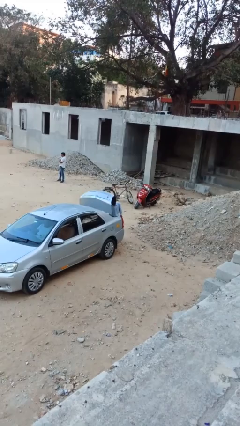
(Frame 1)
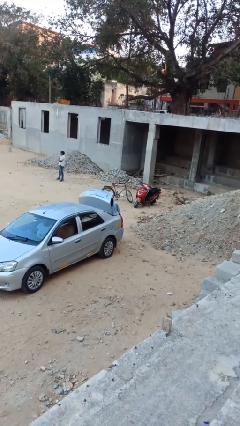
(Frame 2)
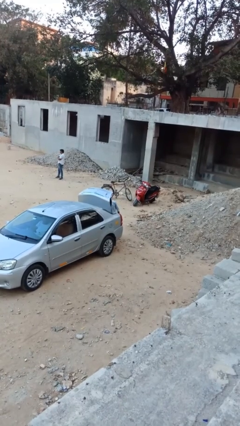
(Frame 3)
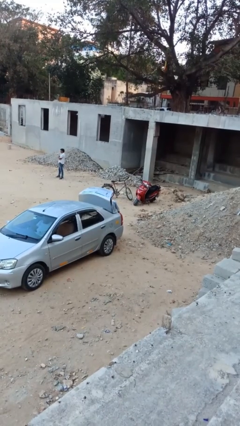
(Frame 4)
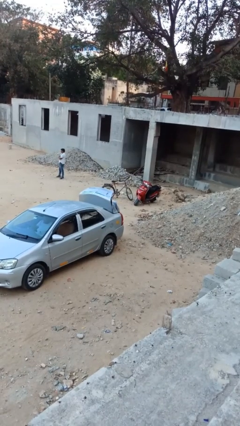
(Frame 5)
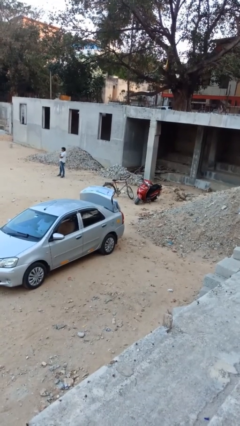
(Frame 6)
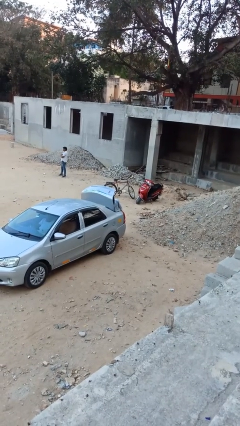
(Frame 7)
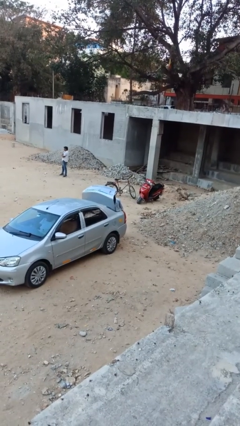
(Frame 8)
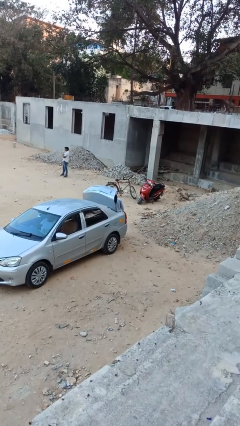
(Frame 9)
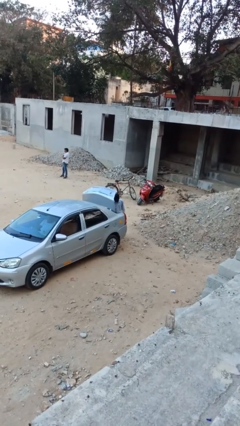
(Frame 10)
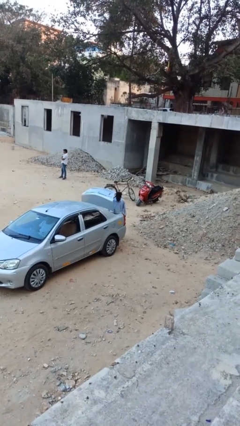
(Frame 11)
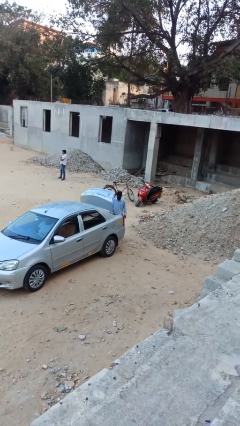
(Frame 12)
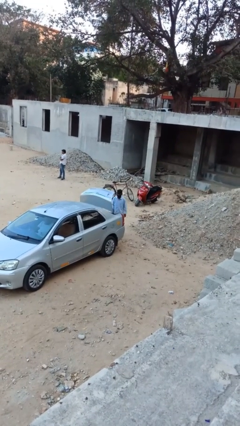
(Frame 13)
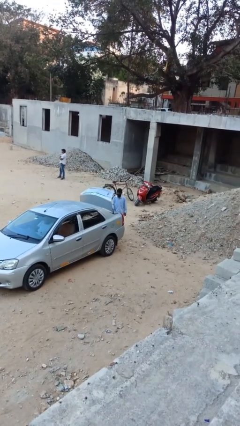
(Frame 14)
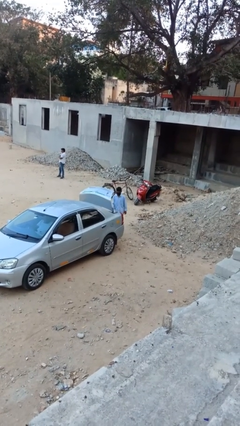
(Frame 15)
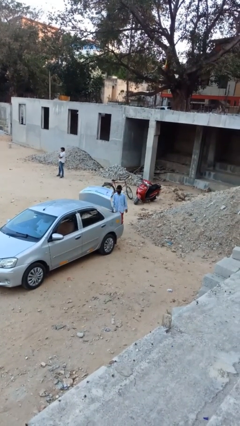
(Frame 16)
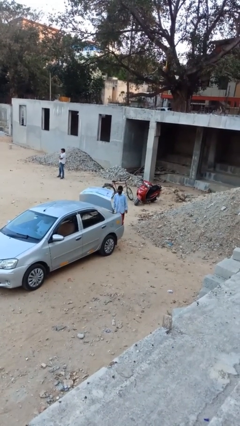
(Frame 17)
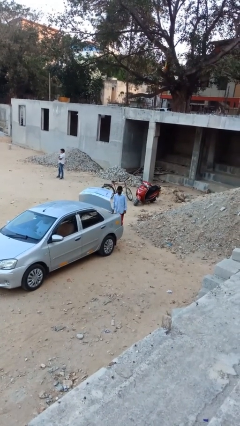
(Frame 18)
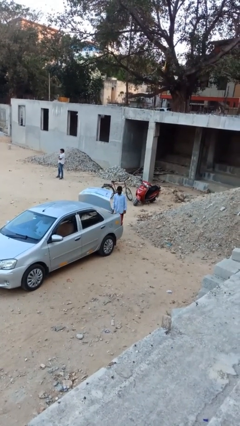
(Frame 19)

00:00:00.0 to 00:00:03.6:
person loads car

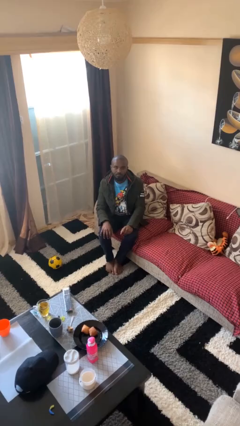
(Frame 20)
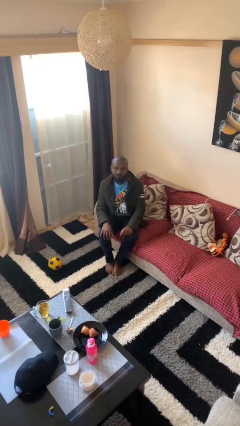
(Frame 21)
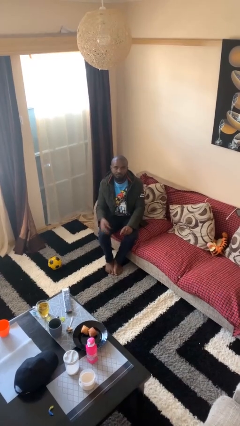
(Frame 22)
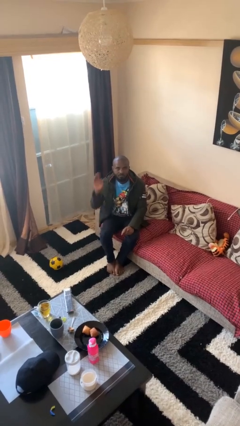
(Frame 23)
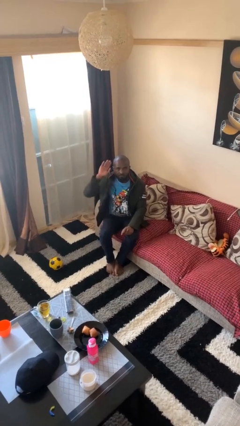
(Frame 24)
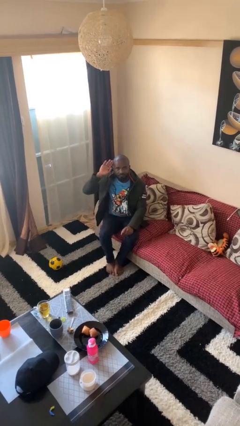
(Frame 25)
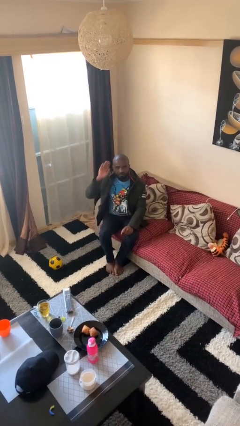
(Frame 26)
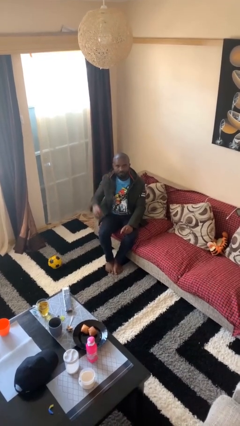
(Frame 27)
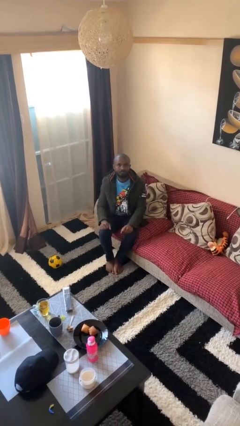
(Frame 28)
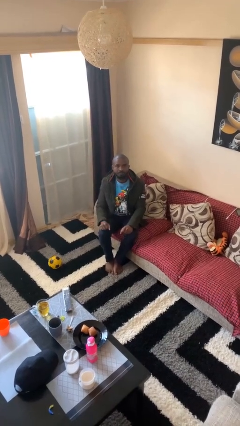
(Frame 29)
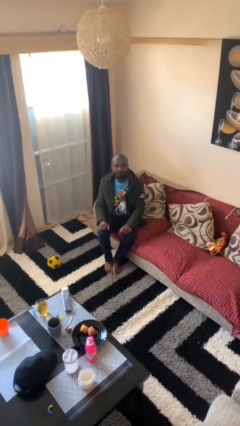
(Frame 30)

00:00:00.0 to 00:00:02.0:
person salutes

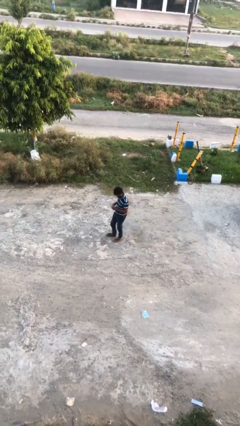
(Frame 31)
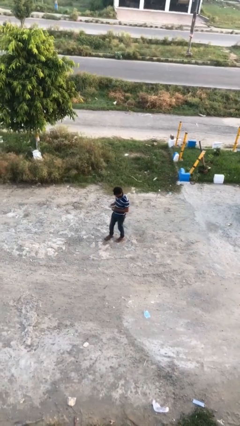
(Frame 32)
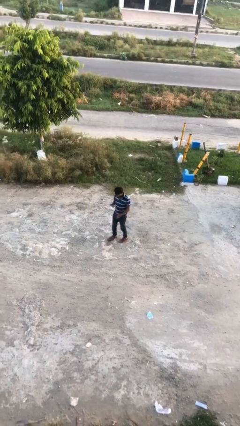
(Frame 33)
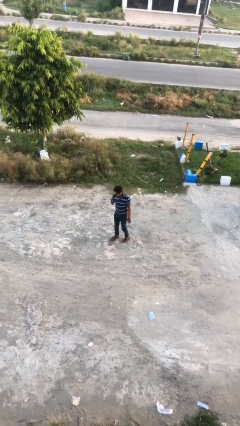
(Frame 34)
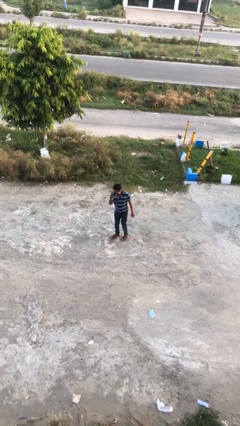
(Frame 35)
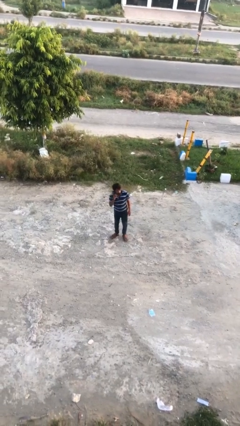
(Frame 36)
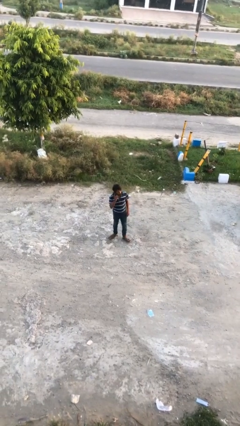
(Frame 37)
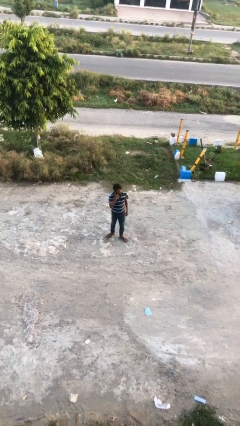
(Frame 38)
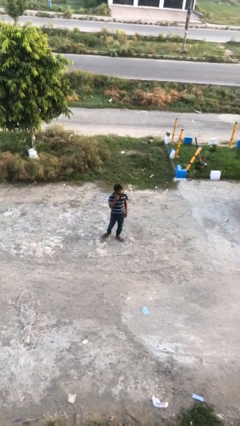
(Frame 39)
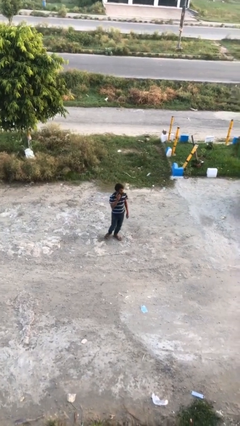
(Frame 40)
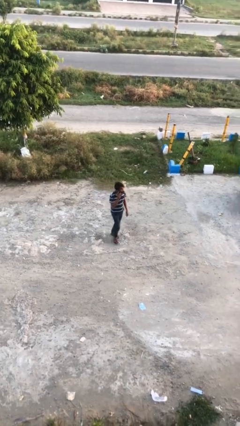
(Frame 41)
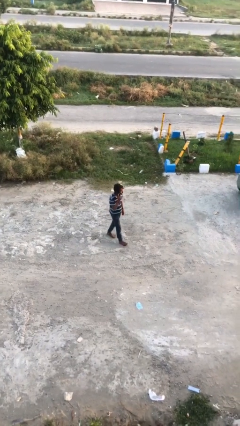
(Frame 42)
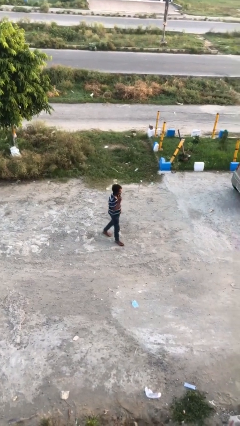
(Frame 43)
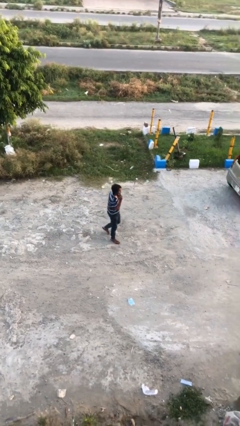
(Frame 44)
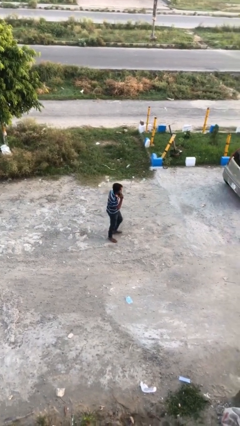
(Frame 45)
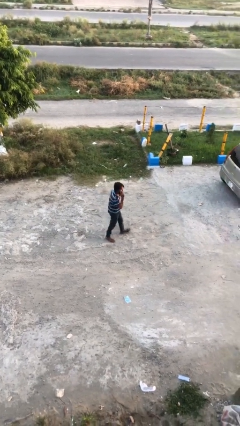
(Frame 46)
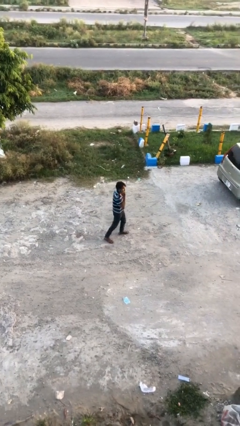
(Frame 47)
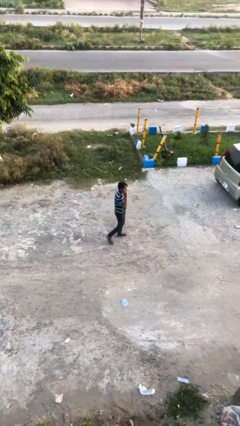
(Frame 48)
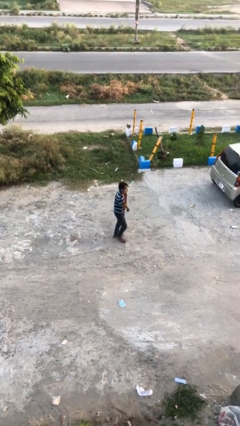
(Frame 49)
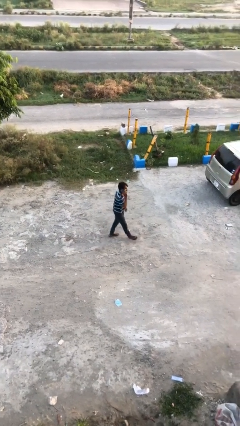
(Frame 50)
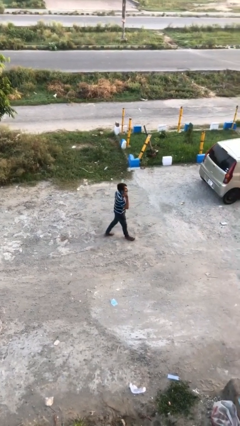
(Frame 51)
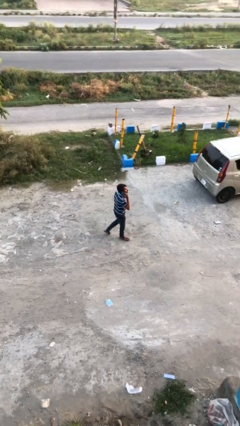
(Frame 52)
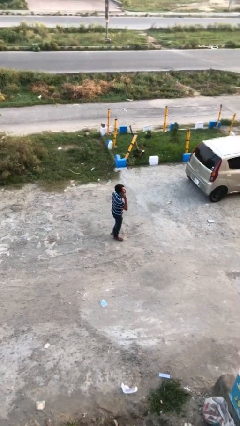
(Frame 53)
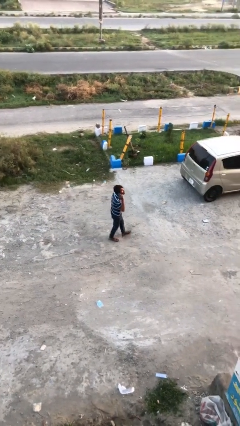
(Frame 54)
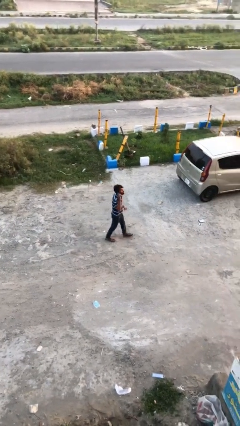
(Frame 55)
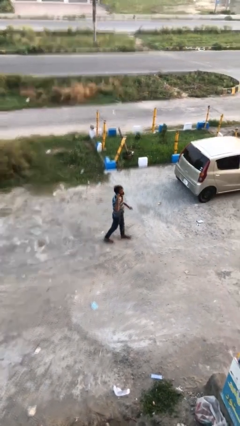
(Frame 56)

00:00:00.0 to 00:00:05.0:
person talks on phone

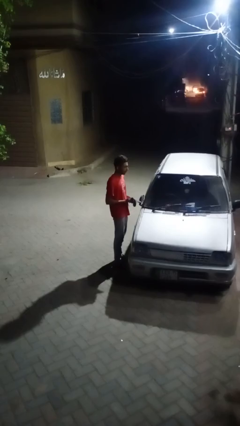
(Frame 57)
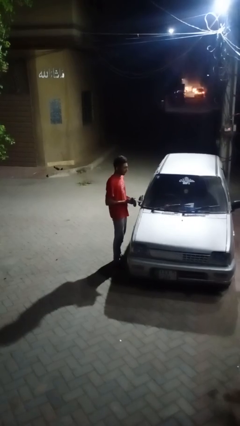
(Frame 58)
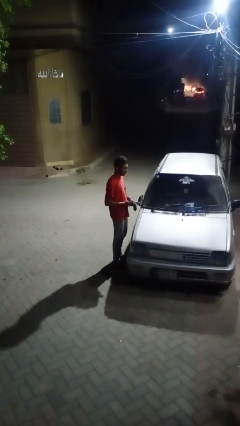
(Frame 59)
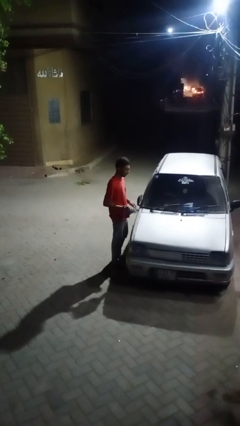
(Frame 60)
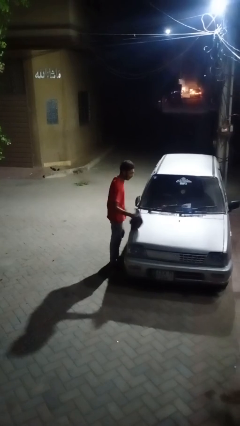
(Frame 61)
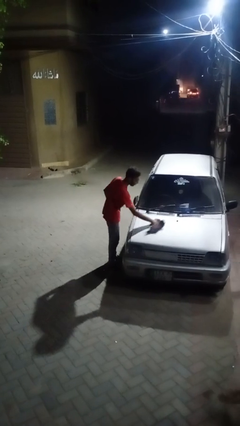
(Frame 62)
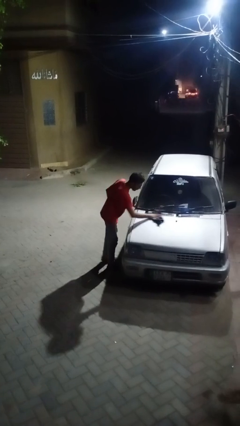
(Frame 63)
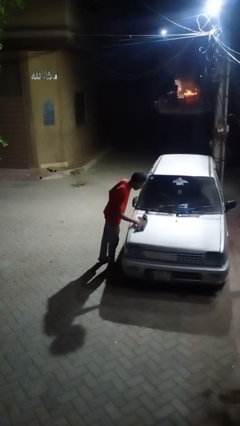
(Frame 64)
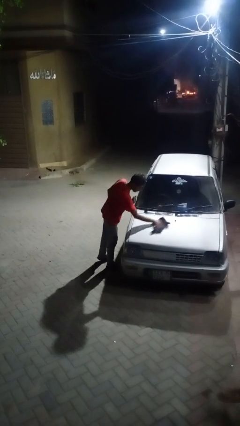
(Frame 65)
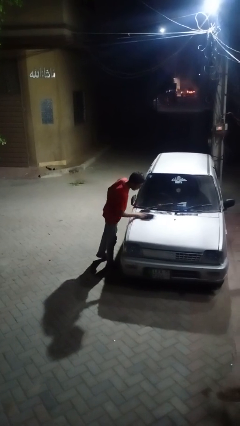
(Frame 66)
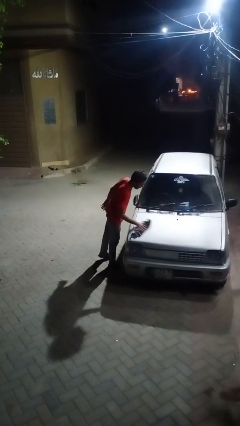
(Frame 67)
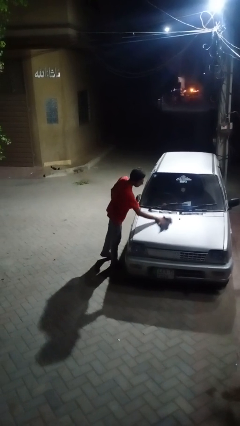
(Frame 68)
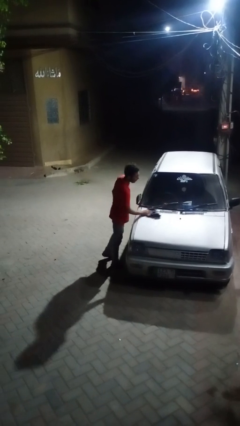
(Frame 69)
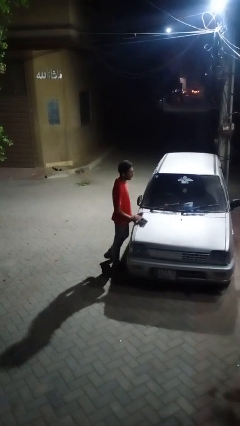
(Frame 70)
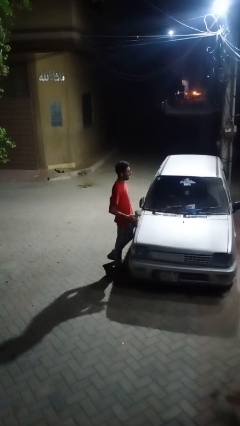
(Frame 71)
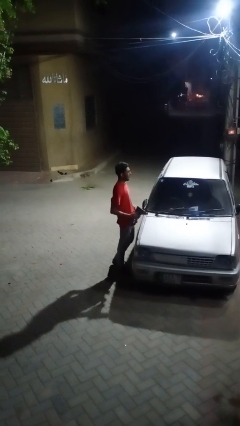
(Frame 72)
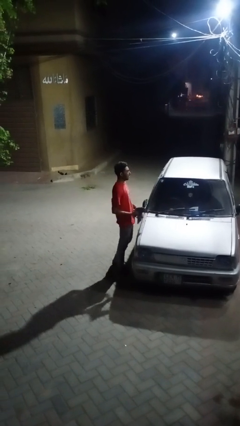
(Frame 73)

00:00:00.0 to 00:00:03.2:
person polishes car with rag

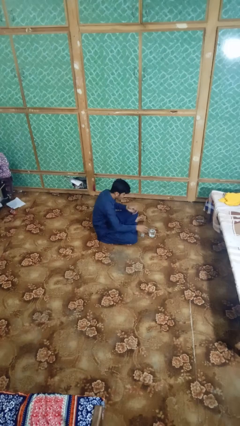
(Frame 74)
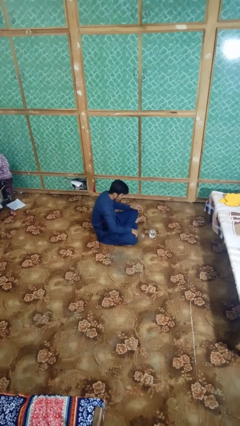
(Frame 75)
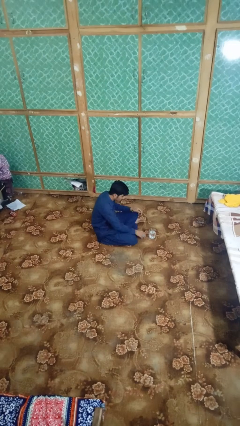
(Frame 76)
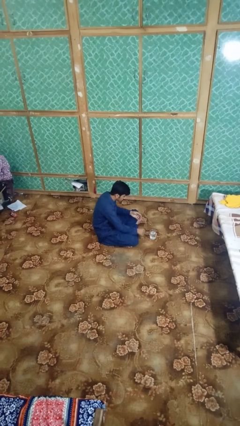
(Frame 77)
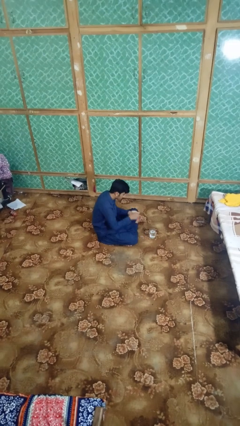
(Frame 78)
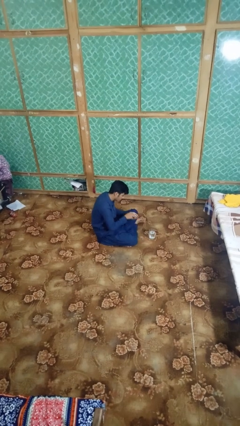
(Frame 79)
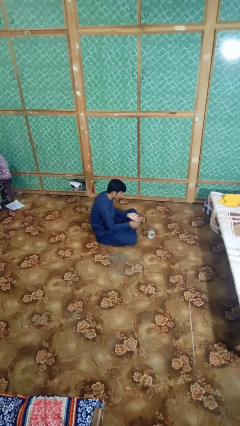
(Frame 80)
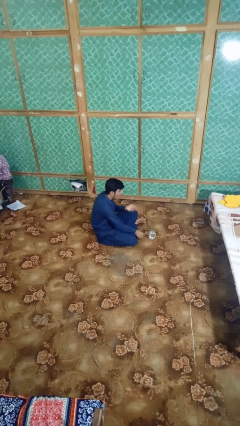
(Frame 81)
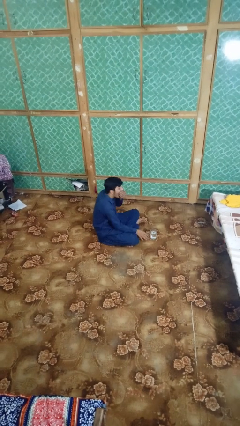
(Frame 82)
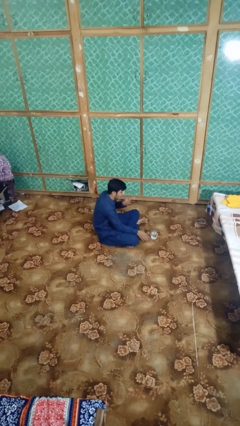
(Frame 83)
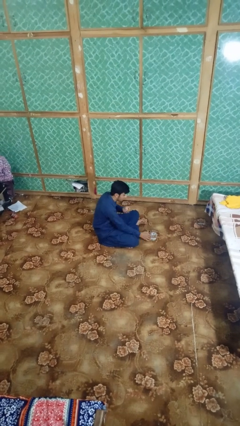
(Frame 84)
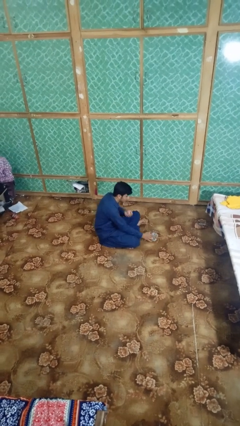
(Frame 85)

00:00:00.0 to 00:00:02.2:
person takes medicine pills

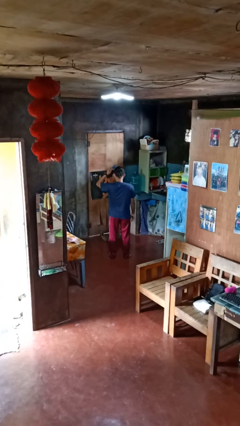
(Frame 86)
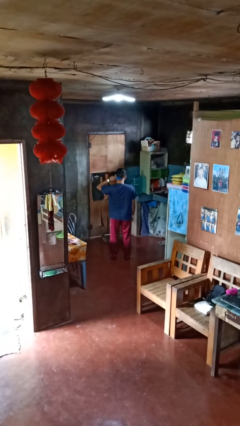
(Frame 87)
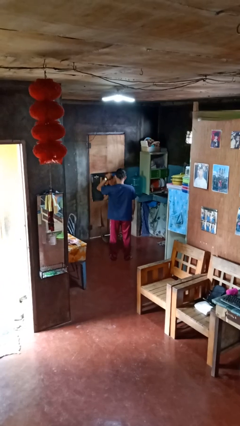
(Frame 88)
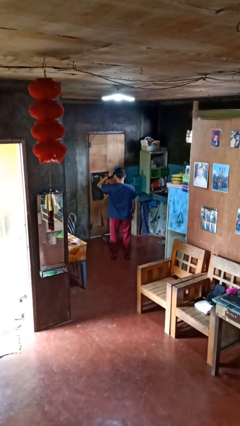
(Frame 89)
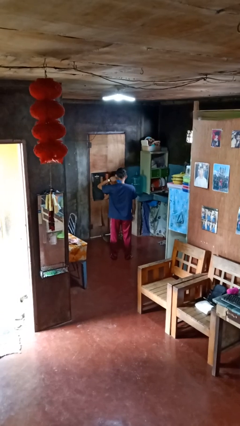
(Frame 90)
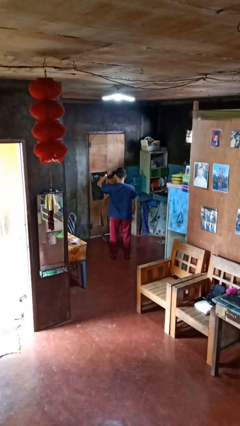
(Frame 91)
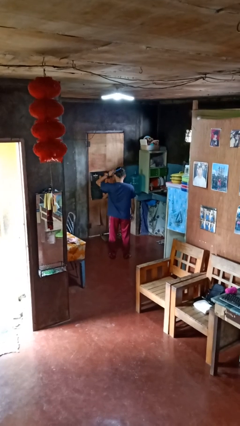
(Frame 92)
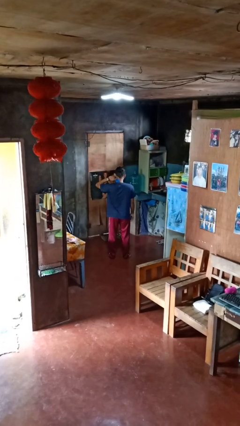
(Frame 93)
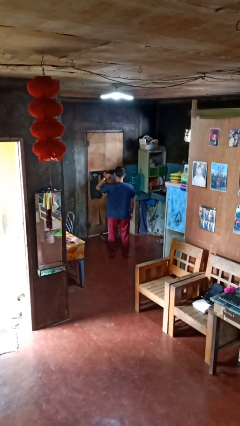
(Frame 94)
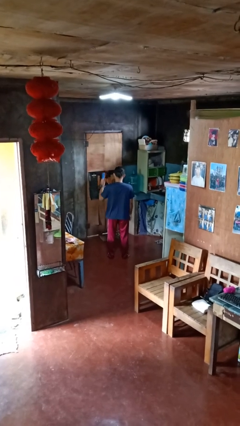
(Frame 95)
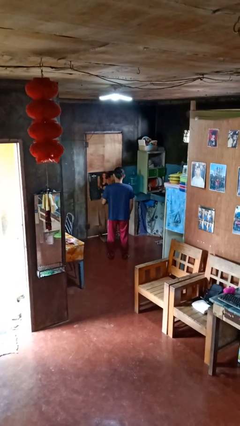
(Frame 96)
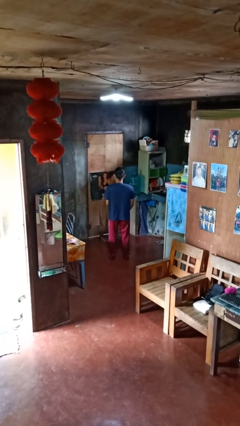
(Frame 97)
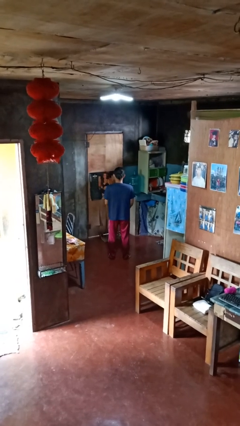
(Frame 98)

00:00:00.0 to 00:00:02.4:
person brushes hair
